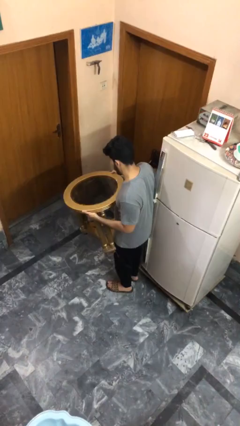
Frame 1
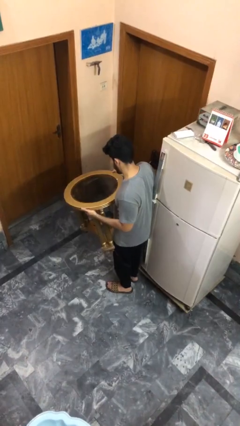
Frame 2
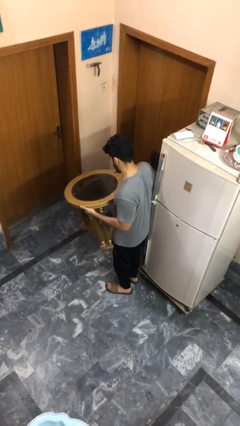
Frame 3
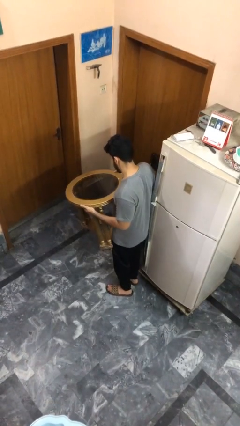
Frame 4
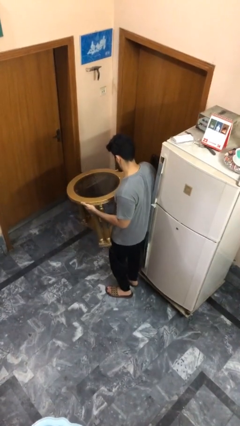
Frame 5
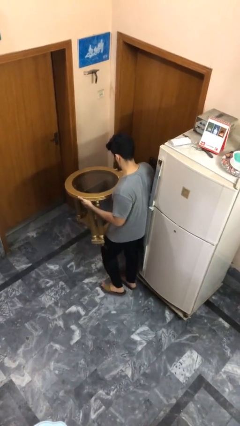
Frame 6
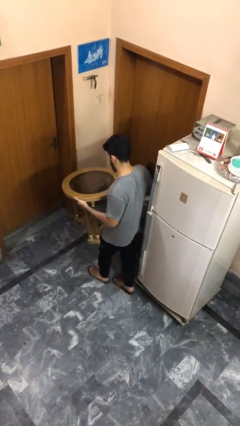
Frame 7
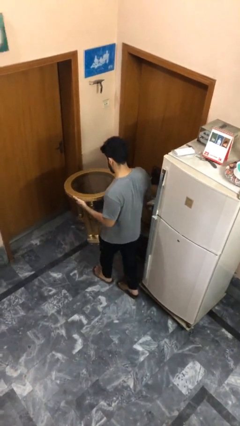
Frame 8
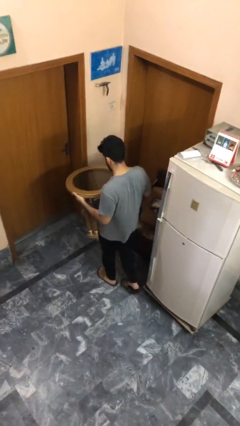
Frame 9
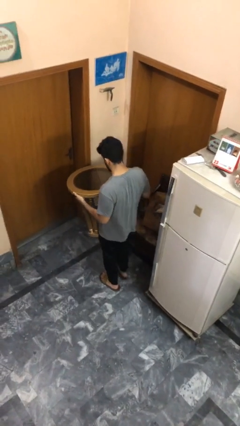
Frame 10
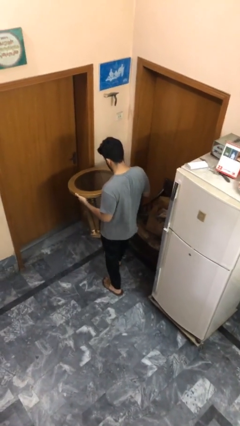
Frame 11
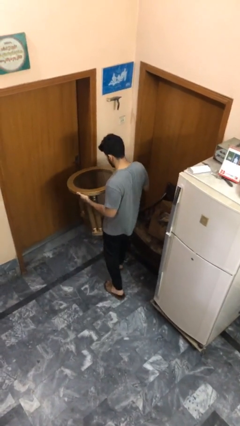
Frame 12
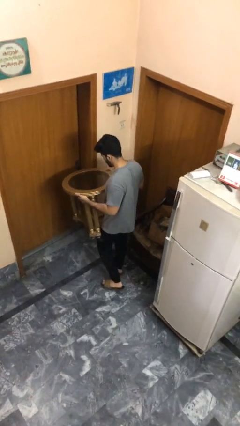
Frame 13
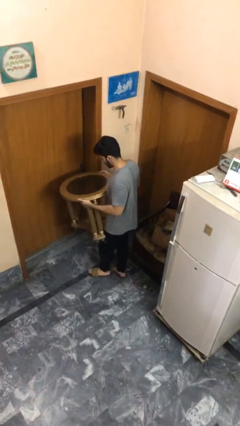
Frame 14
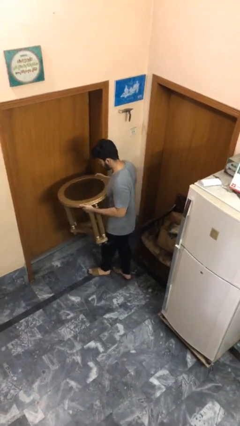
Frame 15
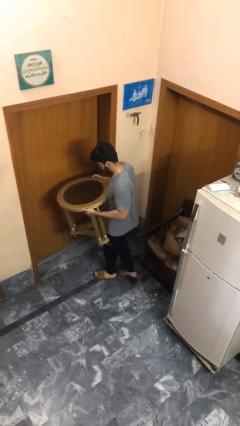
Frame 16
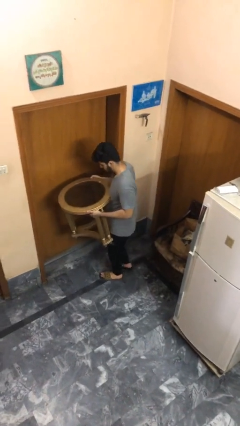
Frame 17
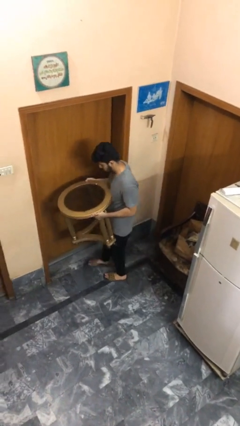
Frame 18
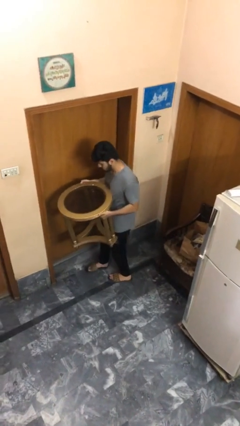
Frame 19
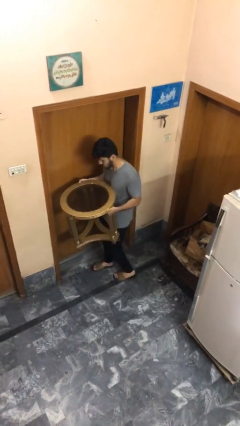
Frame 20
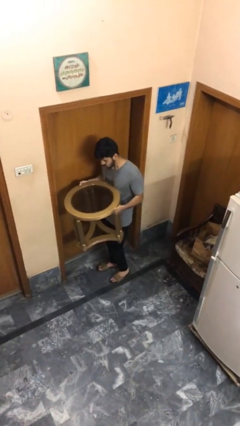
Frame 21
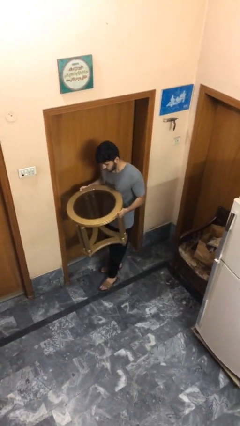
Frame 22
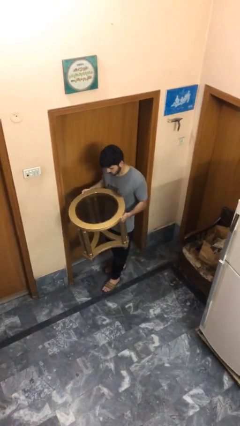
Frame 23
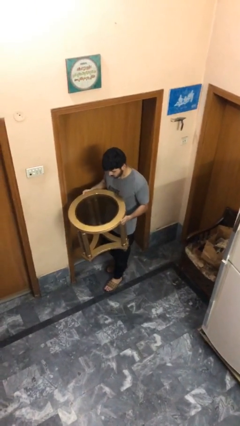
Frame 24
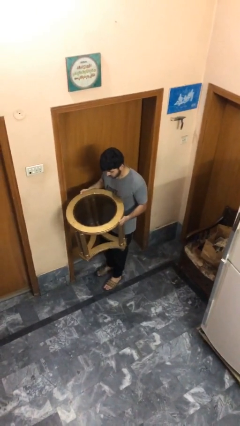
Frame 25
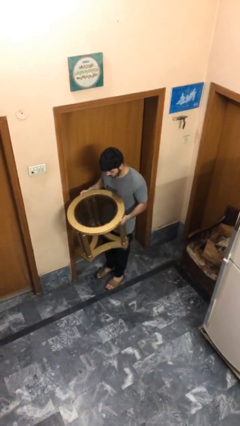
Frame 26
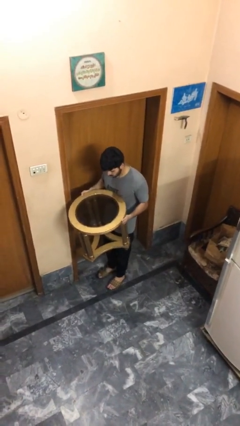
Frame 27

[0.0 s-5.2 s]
person carries furniture

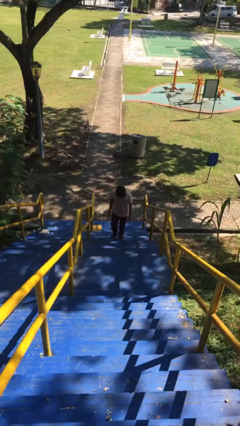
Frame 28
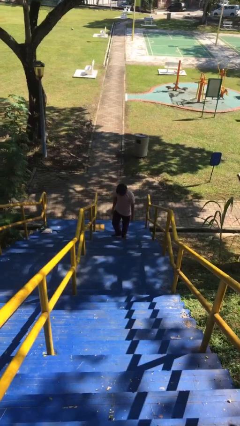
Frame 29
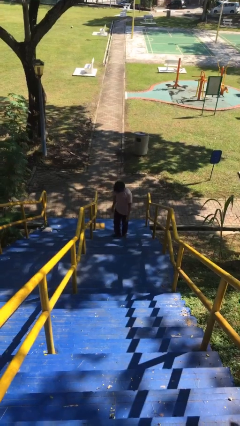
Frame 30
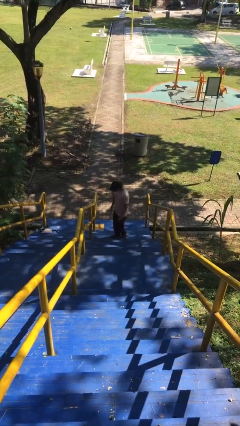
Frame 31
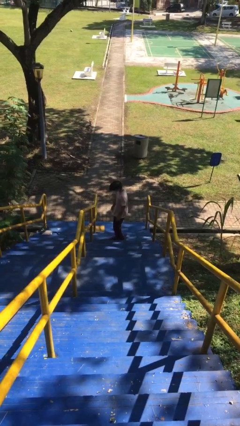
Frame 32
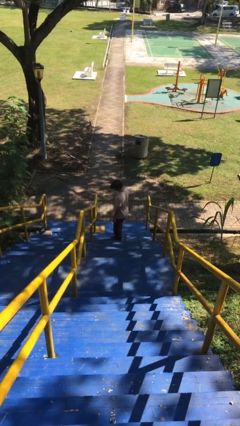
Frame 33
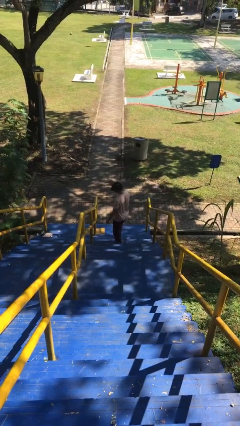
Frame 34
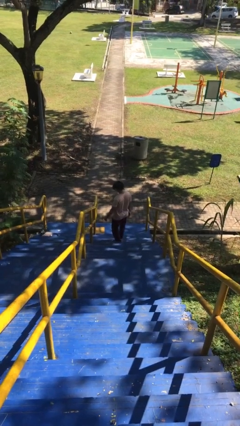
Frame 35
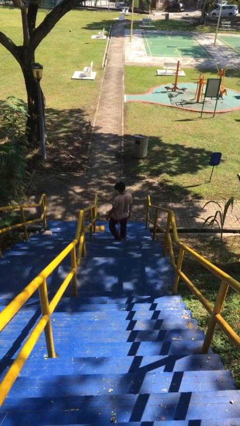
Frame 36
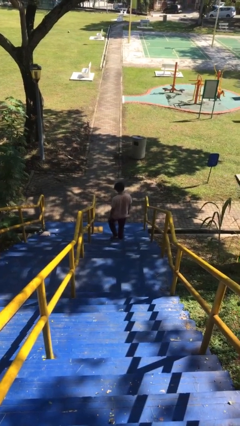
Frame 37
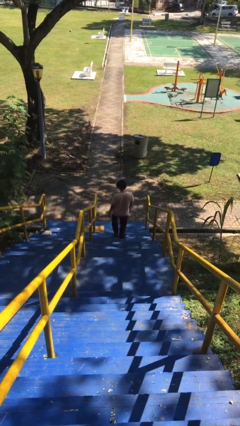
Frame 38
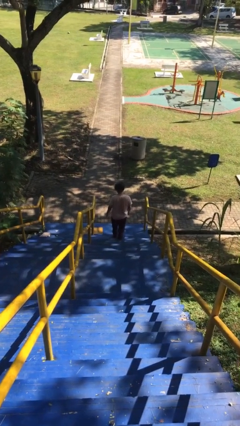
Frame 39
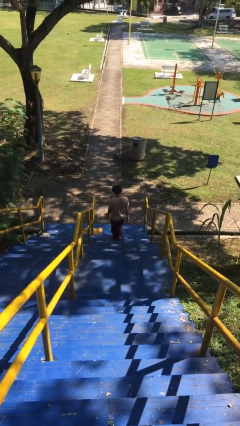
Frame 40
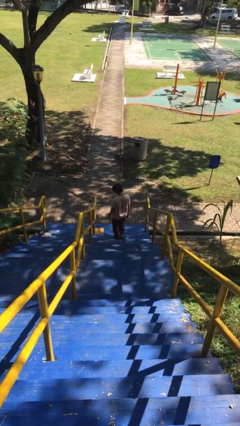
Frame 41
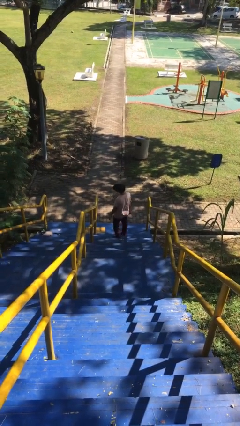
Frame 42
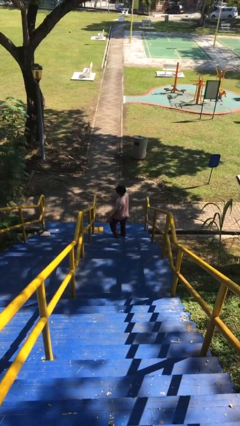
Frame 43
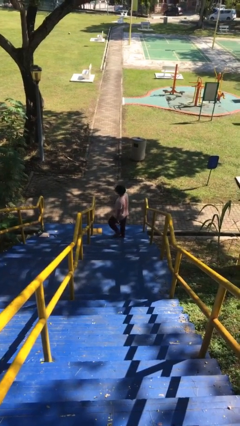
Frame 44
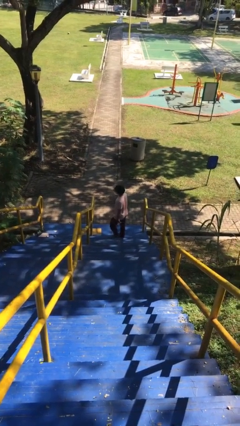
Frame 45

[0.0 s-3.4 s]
person climbs down stairs

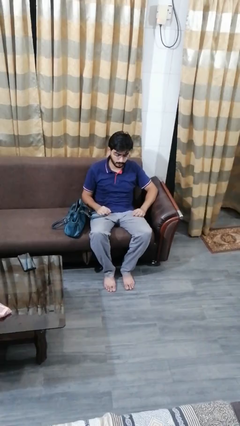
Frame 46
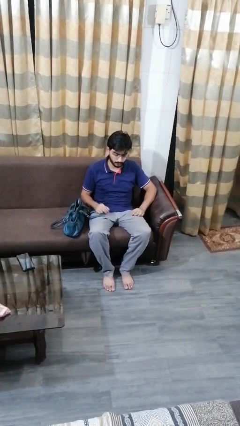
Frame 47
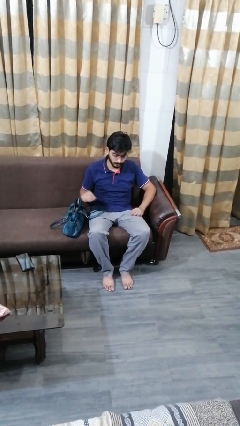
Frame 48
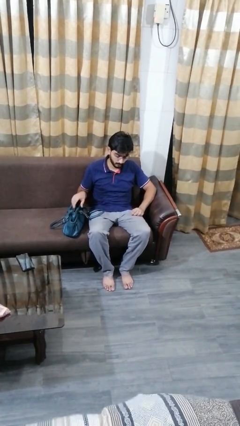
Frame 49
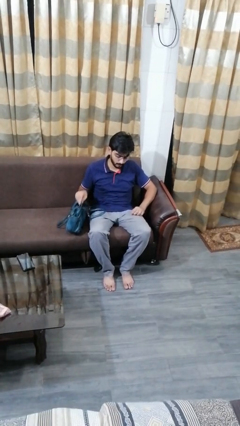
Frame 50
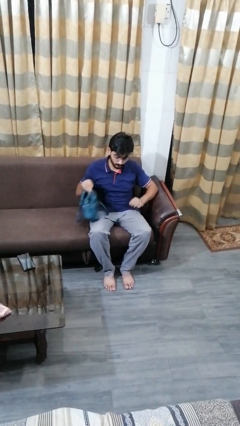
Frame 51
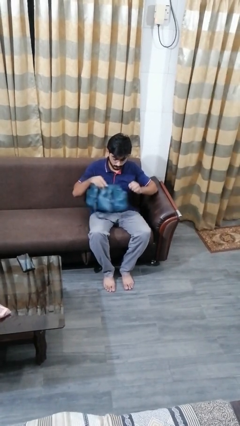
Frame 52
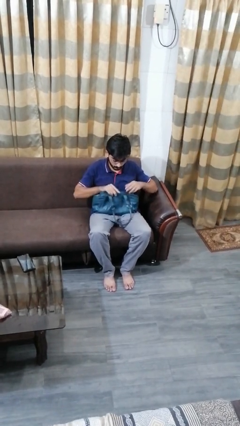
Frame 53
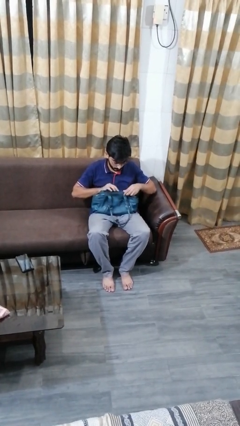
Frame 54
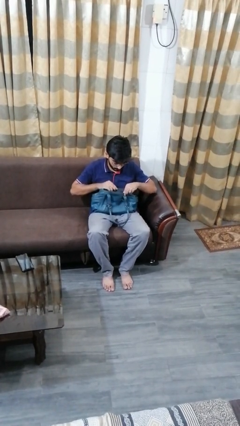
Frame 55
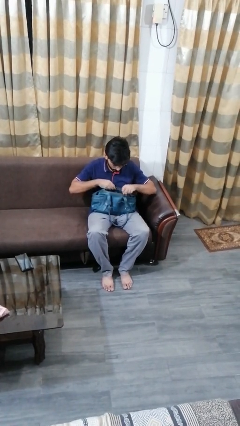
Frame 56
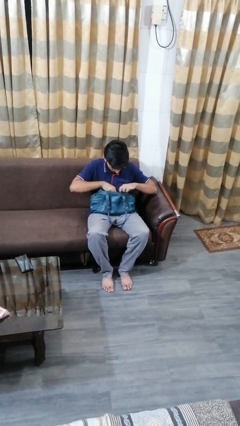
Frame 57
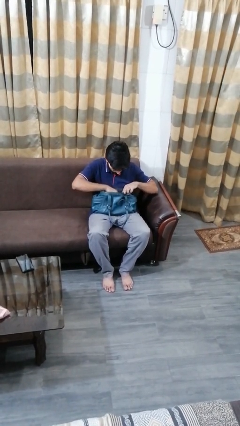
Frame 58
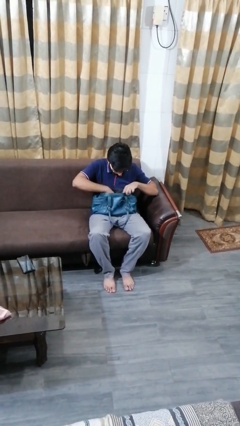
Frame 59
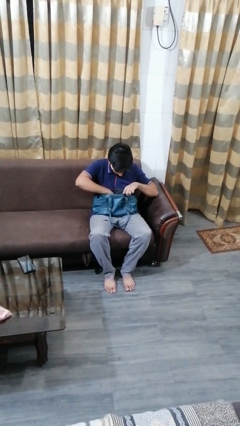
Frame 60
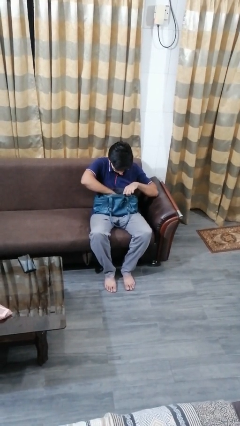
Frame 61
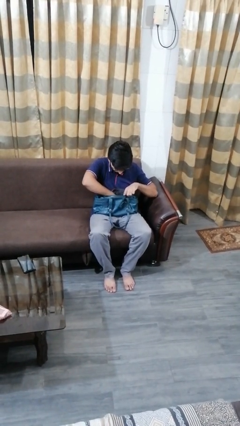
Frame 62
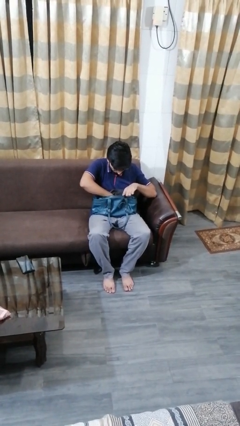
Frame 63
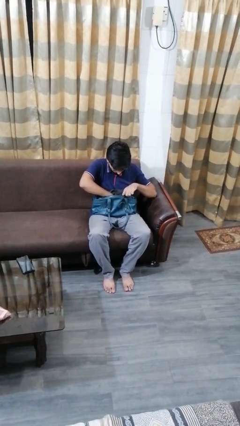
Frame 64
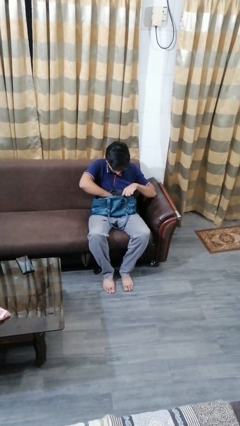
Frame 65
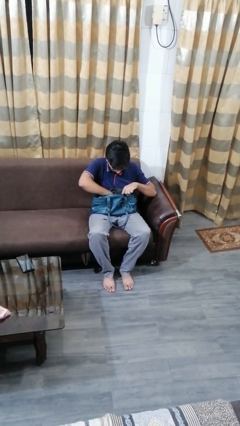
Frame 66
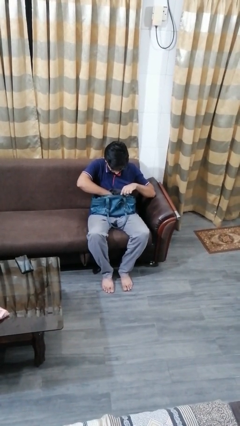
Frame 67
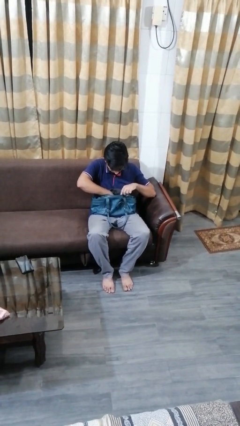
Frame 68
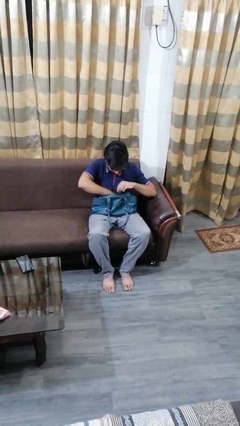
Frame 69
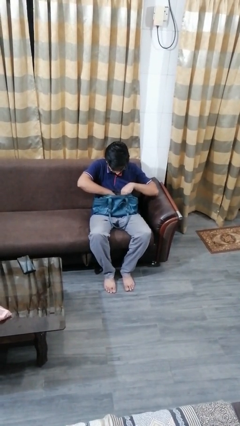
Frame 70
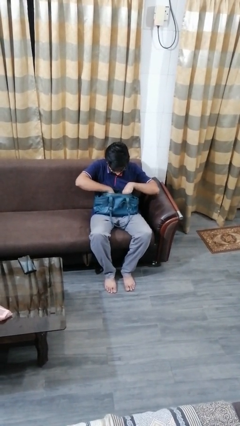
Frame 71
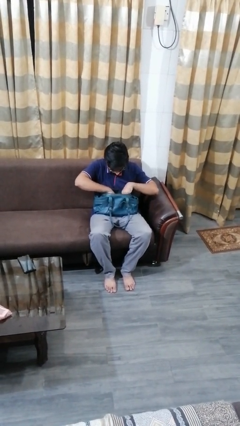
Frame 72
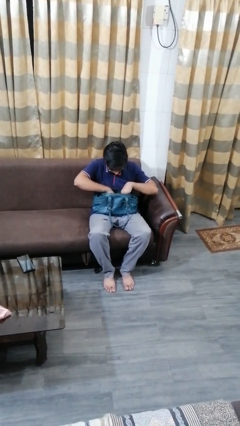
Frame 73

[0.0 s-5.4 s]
person searches in purse

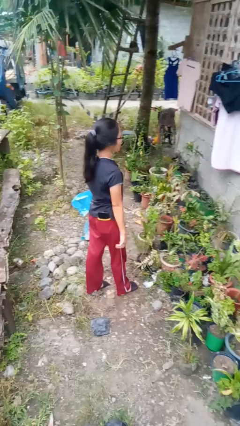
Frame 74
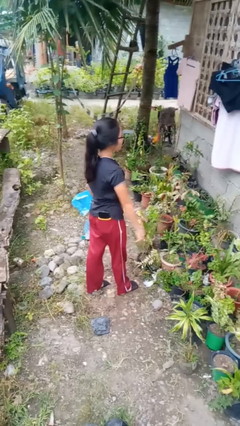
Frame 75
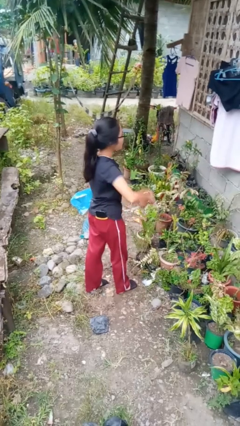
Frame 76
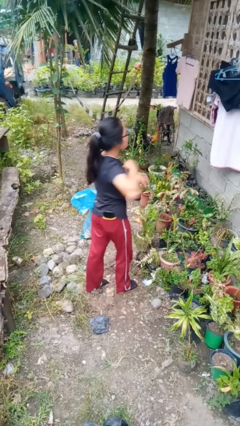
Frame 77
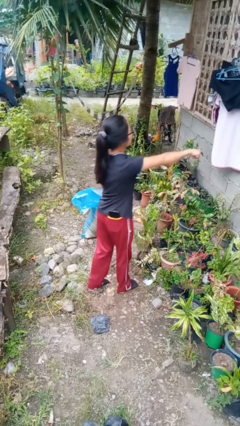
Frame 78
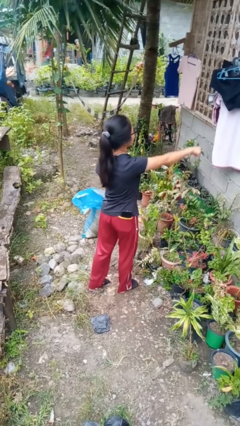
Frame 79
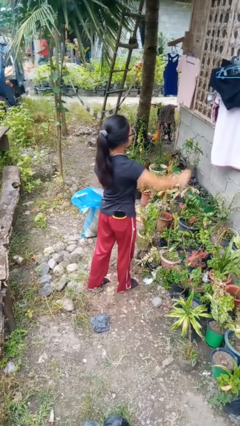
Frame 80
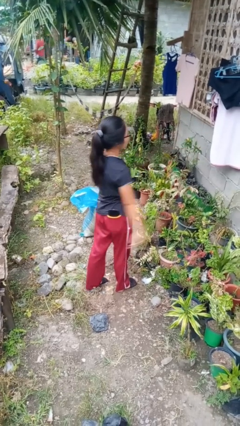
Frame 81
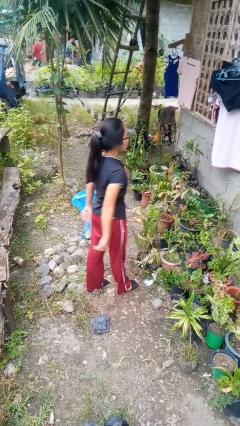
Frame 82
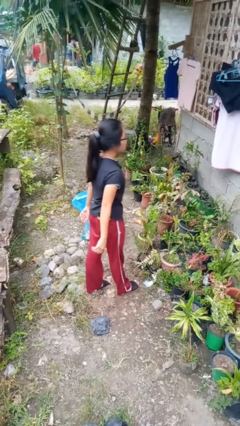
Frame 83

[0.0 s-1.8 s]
person punches

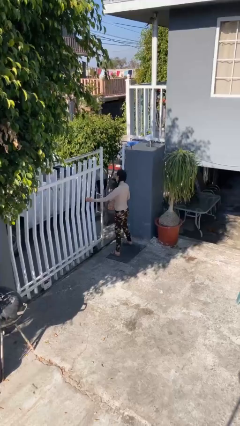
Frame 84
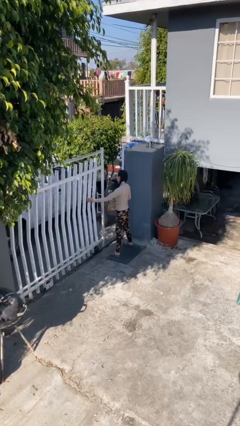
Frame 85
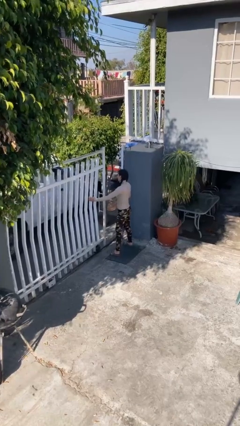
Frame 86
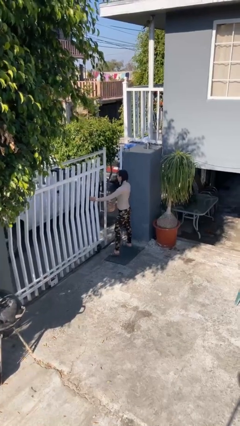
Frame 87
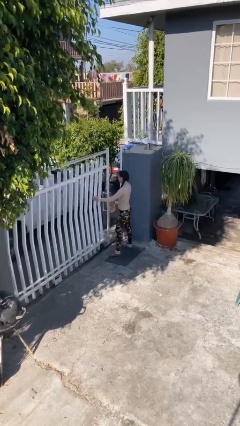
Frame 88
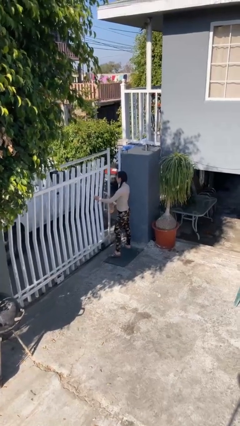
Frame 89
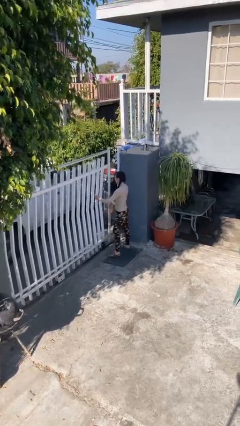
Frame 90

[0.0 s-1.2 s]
person closes facility door

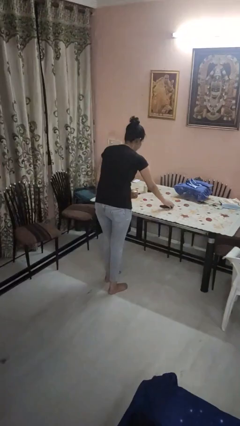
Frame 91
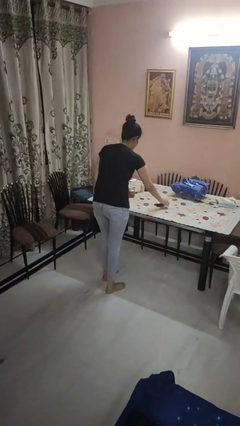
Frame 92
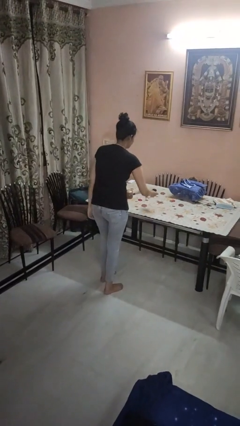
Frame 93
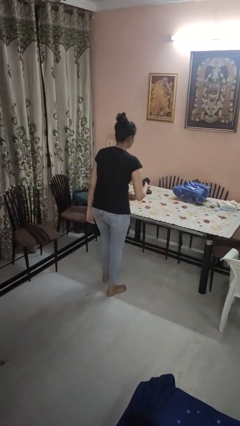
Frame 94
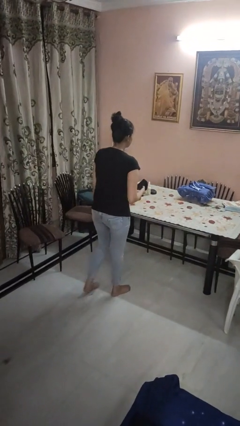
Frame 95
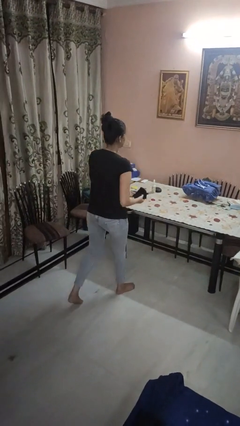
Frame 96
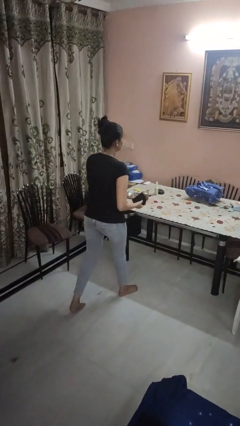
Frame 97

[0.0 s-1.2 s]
person picks up object from table
